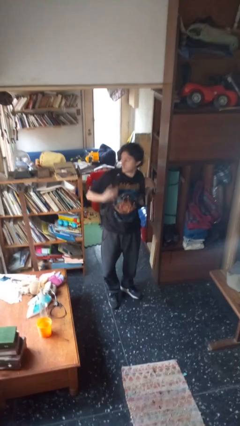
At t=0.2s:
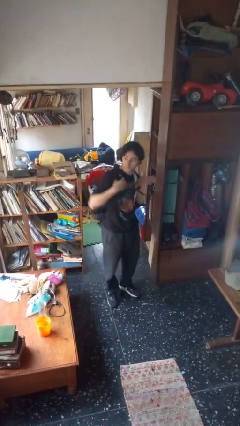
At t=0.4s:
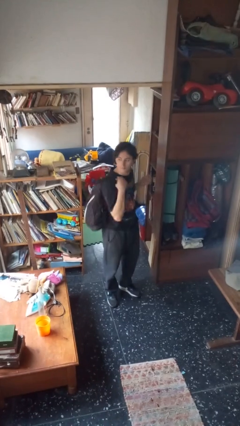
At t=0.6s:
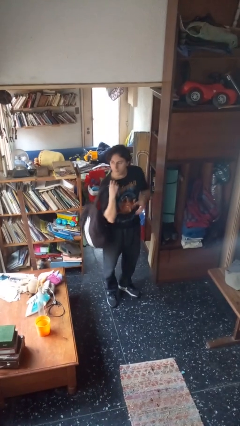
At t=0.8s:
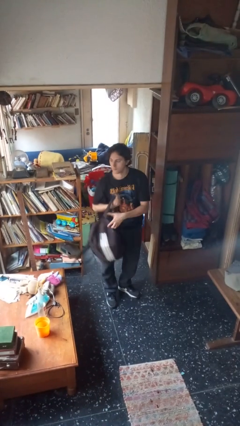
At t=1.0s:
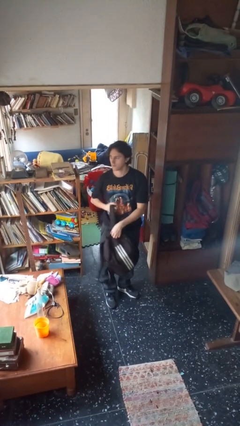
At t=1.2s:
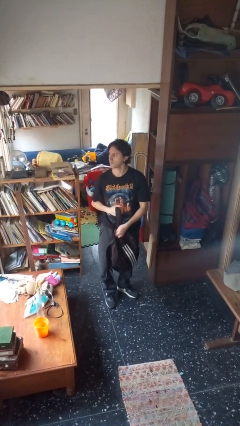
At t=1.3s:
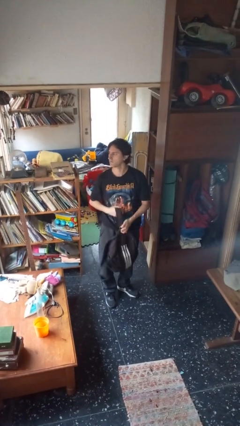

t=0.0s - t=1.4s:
person takes off backpack

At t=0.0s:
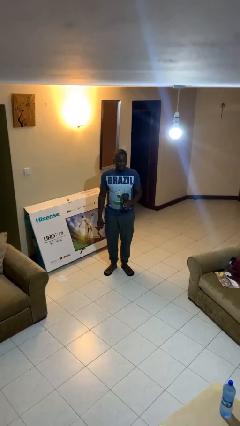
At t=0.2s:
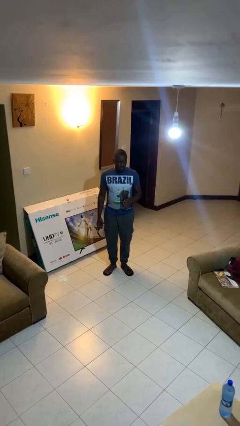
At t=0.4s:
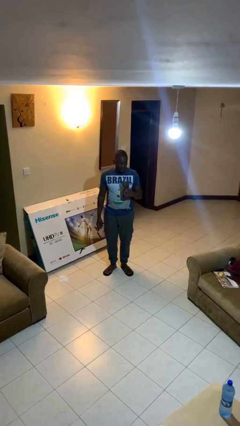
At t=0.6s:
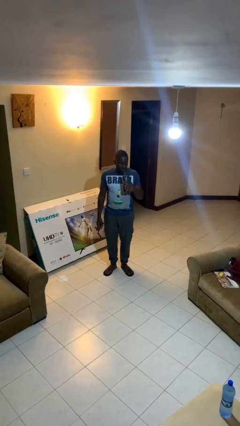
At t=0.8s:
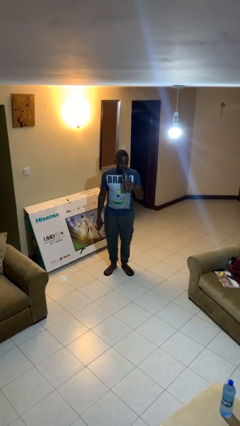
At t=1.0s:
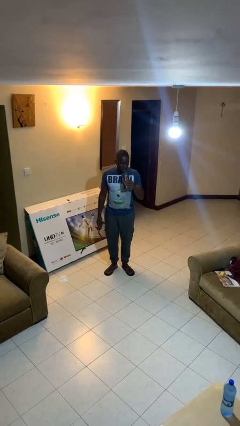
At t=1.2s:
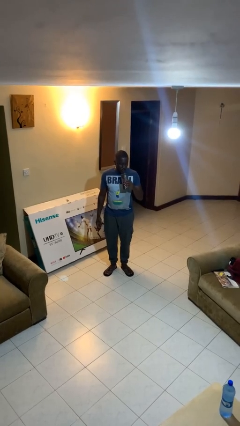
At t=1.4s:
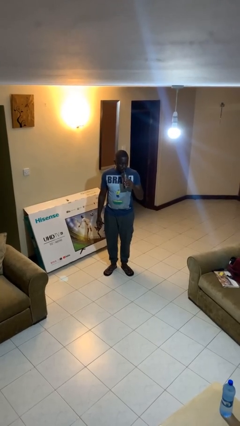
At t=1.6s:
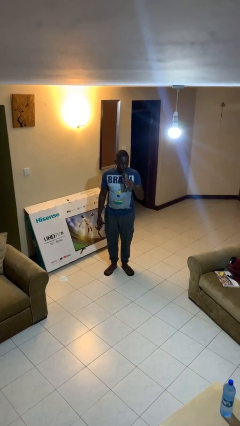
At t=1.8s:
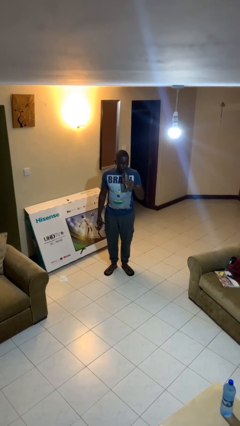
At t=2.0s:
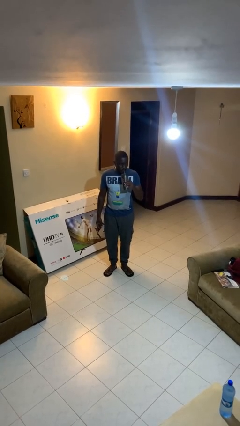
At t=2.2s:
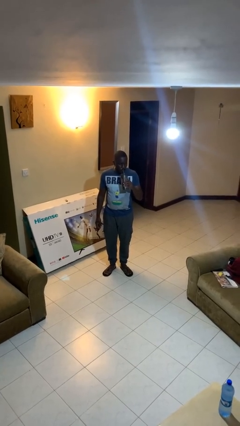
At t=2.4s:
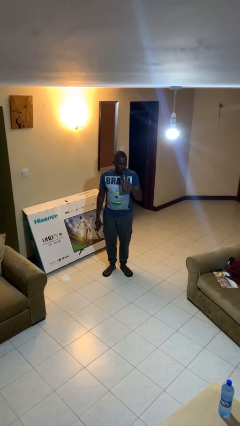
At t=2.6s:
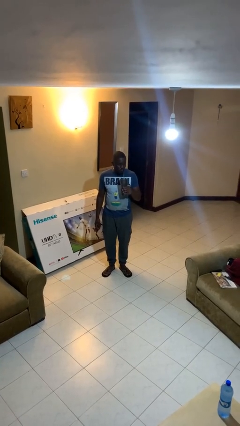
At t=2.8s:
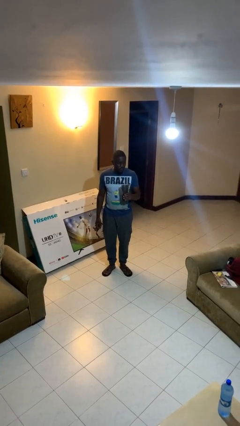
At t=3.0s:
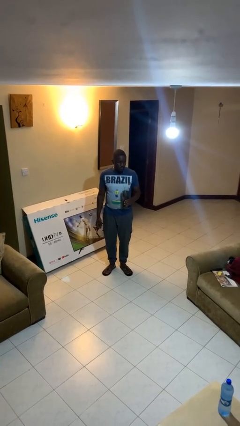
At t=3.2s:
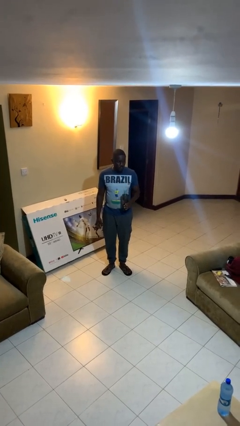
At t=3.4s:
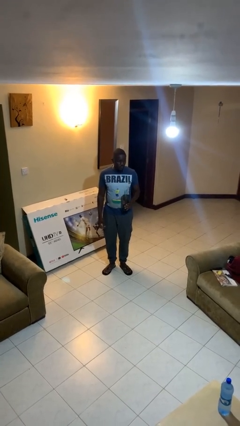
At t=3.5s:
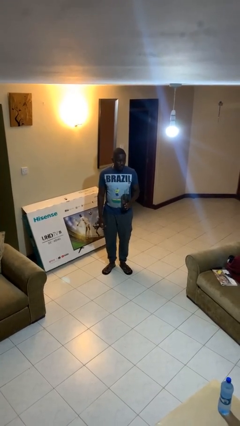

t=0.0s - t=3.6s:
person drinks from straw

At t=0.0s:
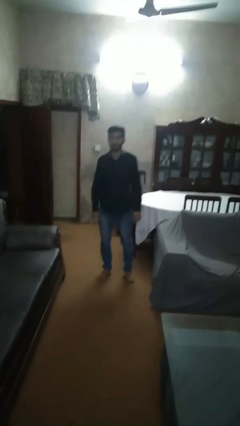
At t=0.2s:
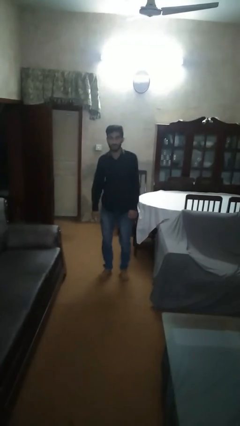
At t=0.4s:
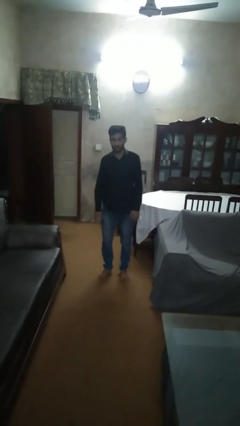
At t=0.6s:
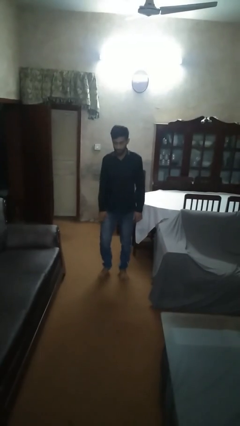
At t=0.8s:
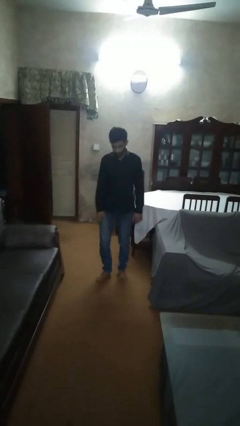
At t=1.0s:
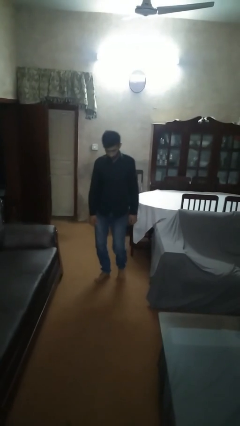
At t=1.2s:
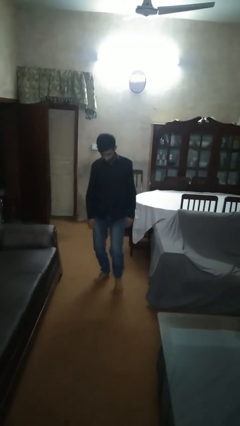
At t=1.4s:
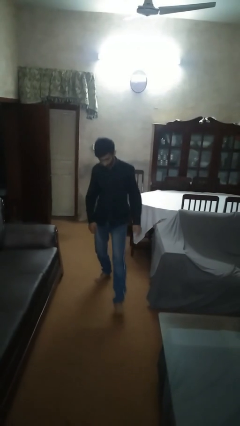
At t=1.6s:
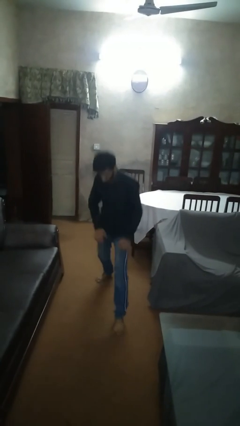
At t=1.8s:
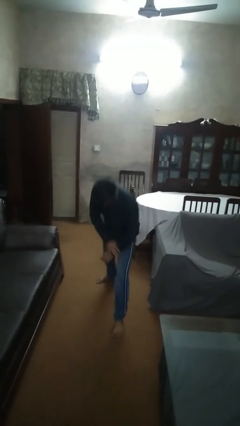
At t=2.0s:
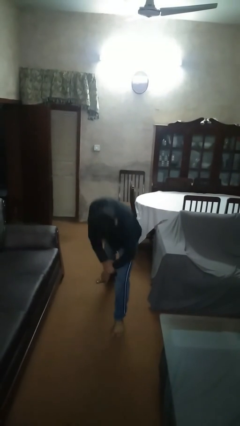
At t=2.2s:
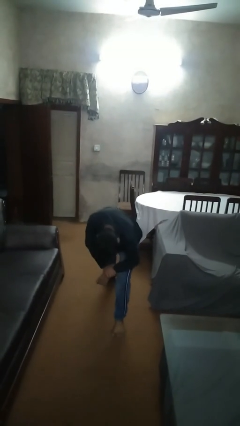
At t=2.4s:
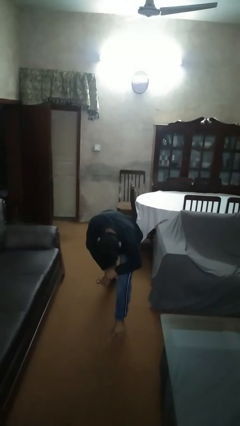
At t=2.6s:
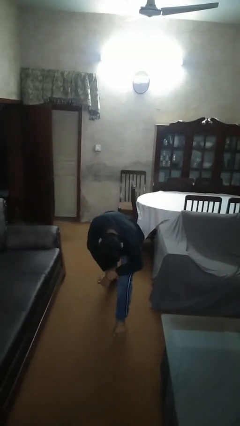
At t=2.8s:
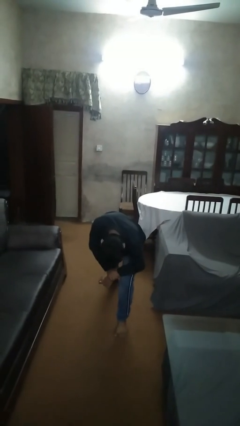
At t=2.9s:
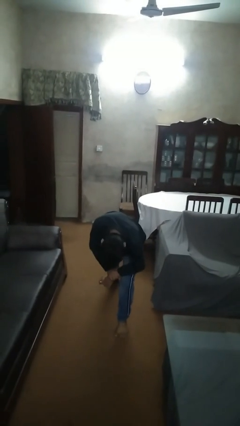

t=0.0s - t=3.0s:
person exercises with lunges

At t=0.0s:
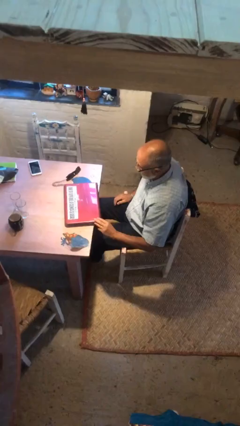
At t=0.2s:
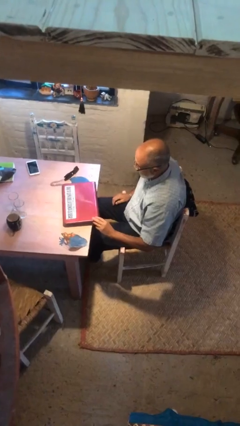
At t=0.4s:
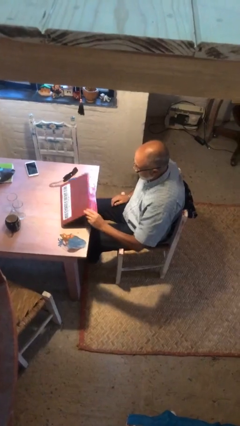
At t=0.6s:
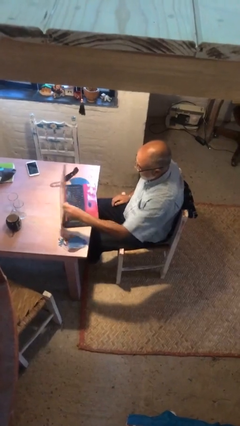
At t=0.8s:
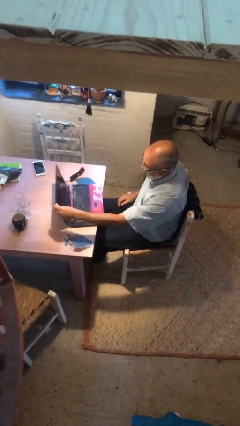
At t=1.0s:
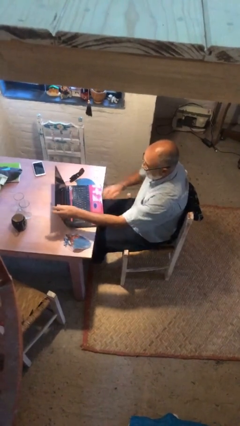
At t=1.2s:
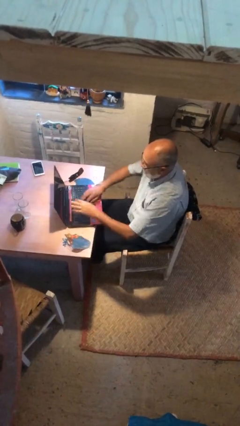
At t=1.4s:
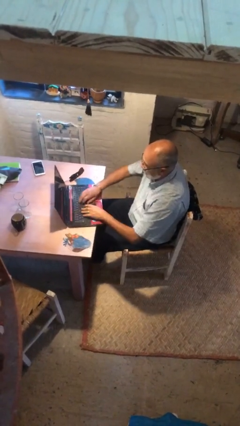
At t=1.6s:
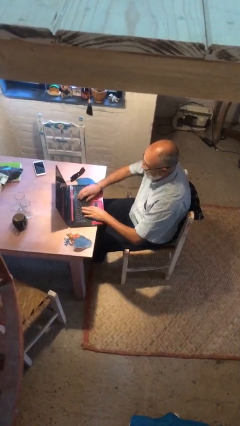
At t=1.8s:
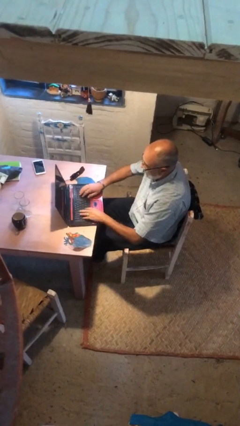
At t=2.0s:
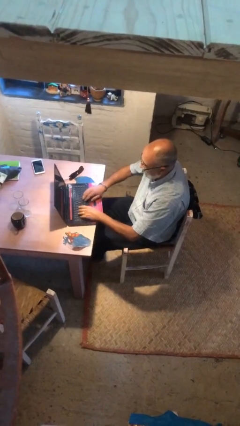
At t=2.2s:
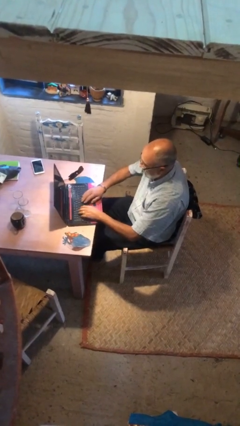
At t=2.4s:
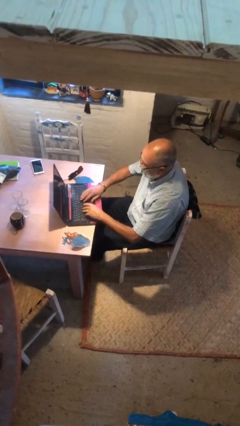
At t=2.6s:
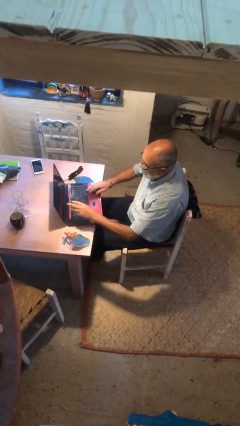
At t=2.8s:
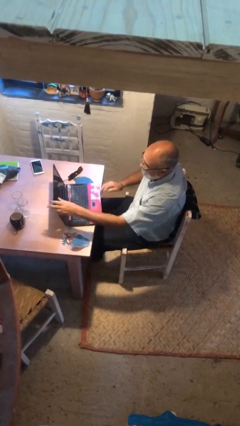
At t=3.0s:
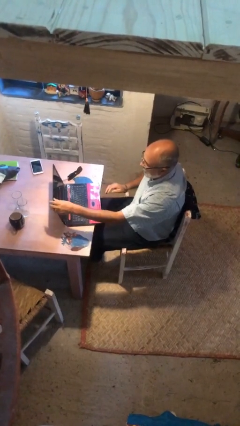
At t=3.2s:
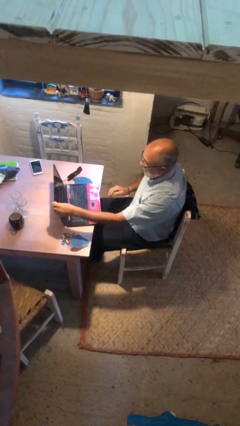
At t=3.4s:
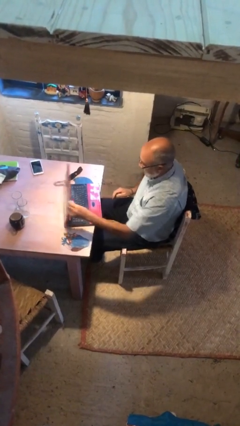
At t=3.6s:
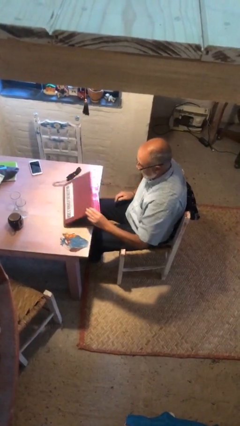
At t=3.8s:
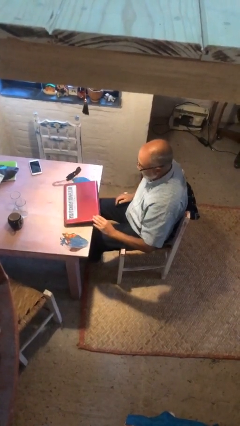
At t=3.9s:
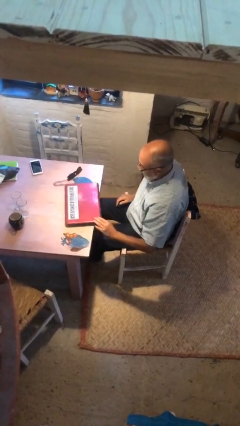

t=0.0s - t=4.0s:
person interacts with laptop

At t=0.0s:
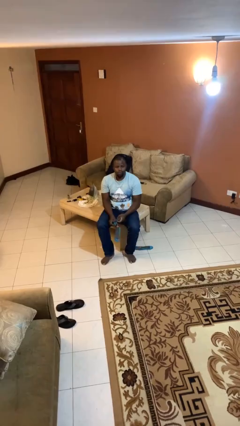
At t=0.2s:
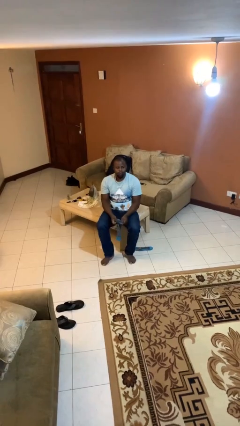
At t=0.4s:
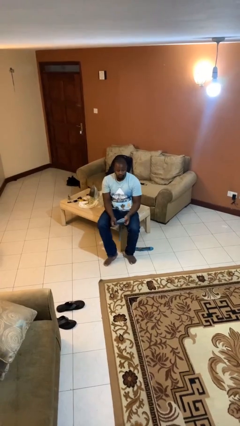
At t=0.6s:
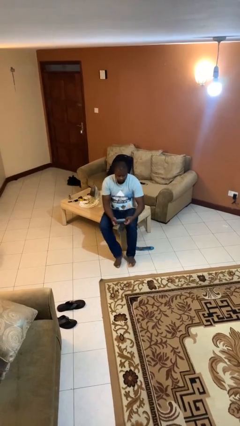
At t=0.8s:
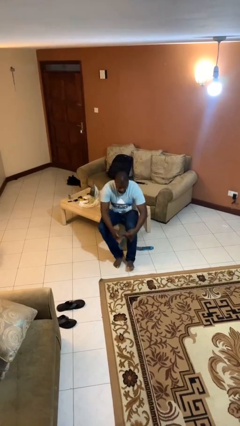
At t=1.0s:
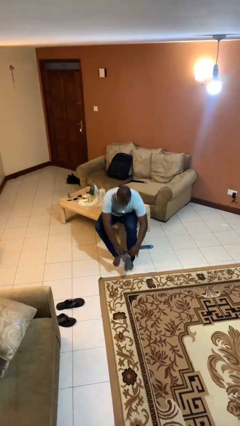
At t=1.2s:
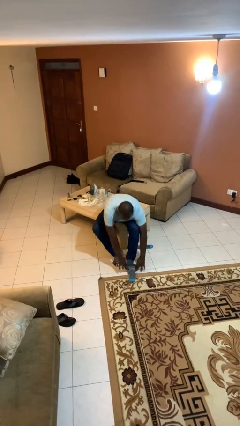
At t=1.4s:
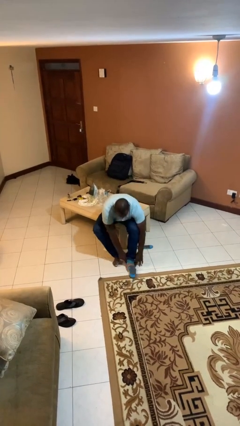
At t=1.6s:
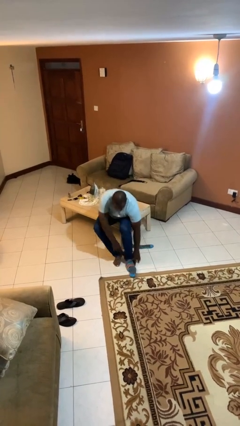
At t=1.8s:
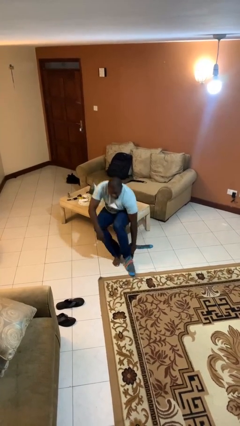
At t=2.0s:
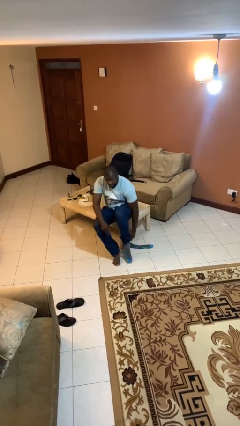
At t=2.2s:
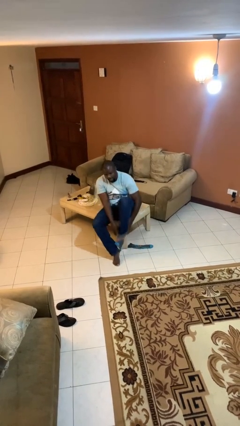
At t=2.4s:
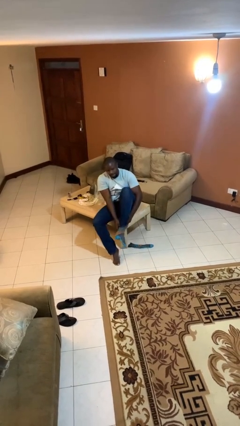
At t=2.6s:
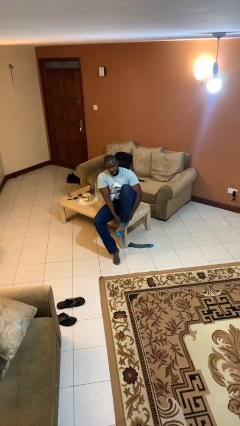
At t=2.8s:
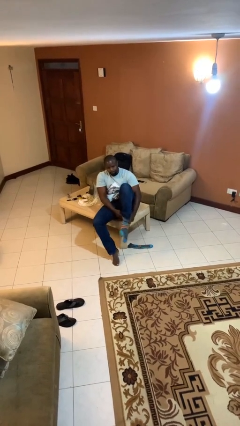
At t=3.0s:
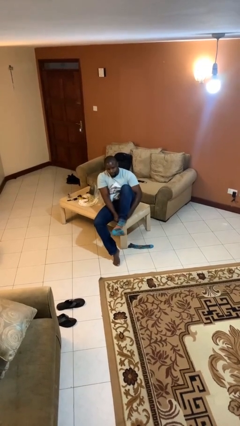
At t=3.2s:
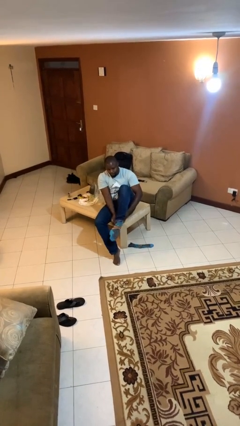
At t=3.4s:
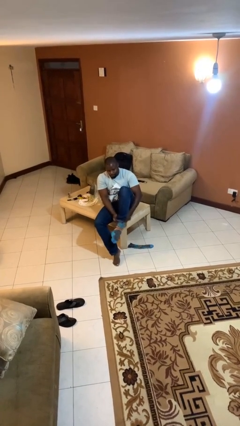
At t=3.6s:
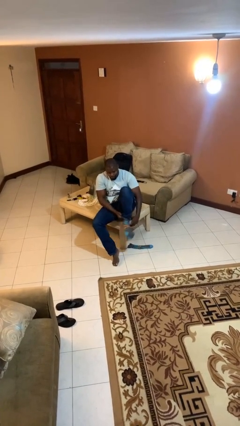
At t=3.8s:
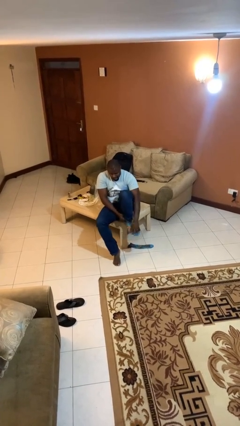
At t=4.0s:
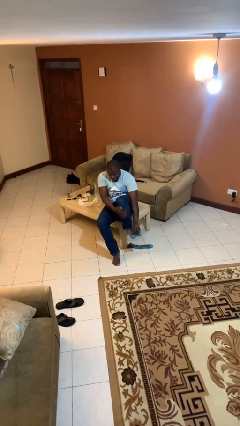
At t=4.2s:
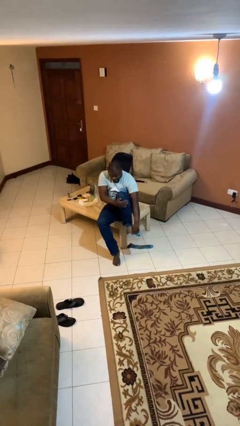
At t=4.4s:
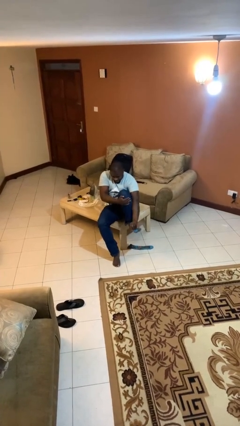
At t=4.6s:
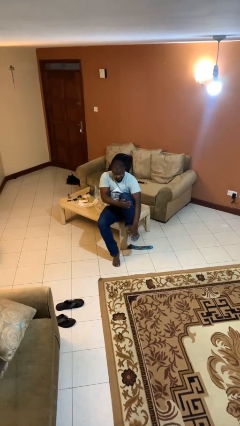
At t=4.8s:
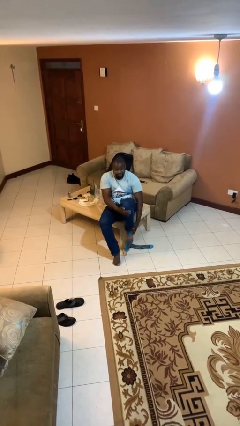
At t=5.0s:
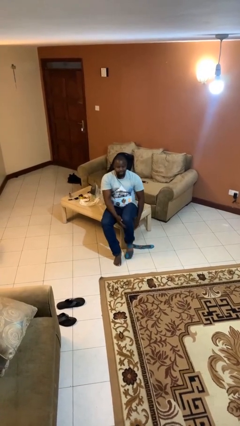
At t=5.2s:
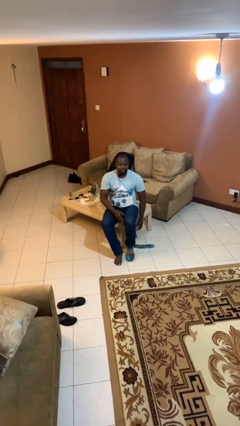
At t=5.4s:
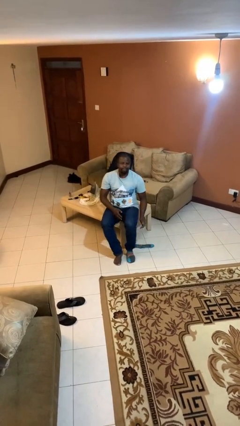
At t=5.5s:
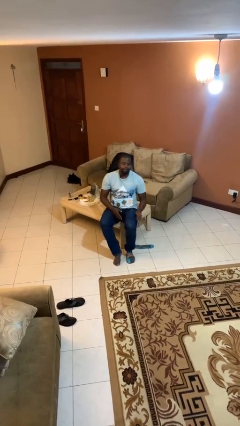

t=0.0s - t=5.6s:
person puts on socks
